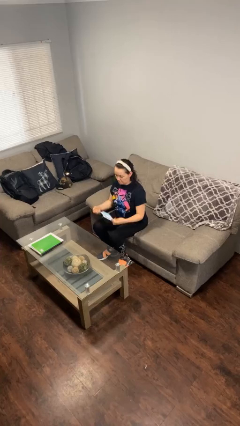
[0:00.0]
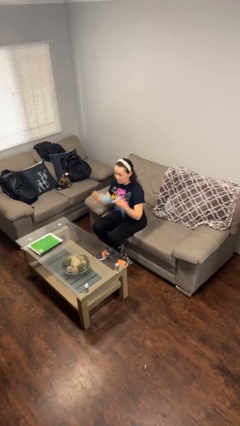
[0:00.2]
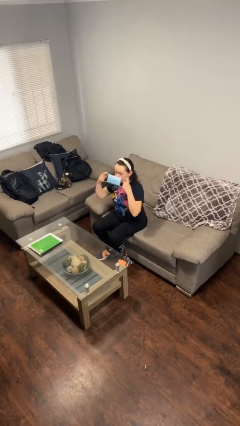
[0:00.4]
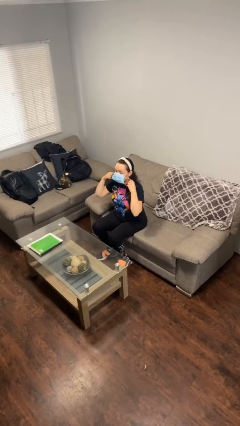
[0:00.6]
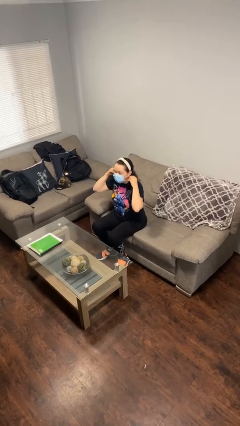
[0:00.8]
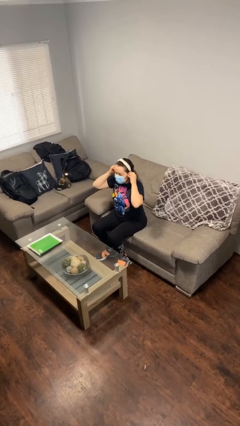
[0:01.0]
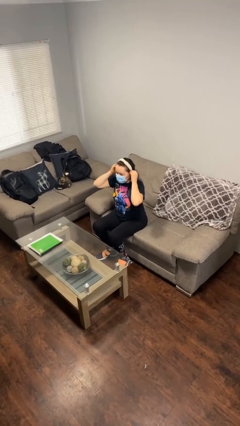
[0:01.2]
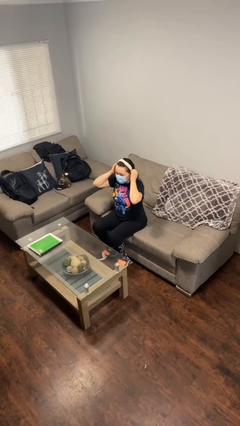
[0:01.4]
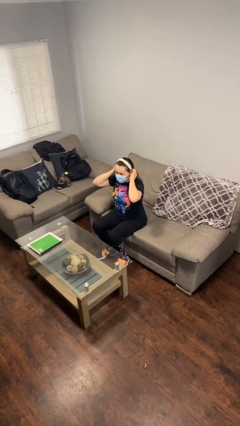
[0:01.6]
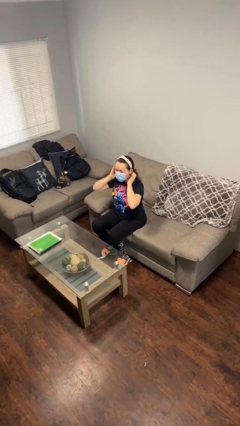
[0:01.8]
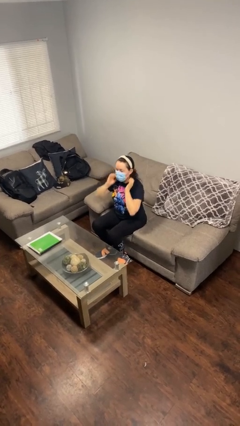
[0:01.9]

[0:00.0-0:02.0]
person puts on facemask

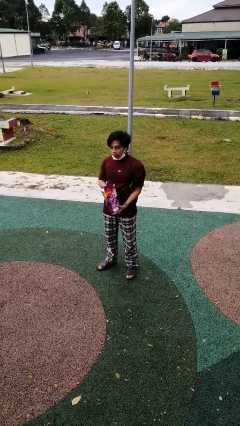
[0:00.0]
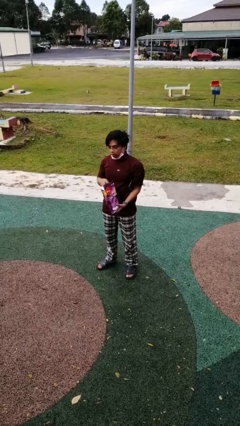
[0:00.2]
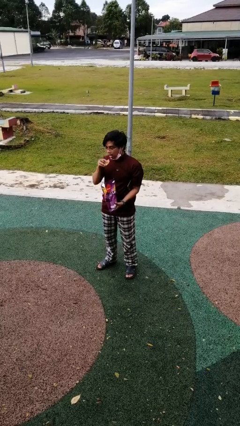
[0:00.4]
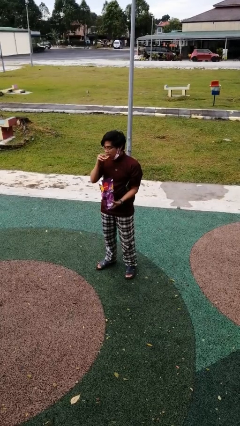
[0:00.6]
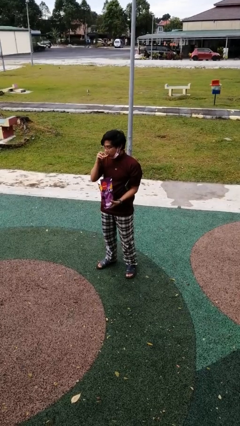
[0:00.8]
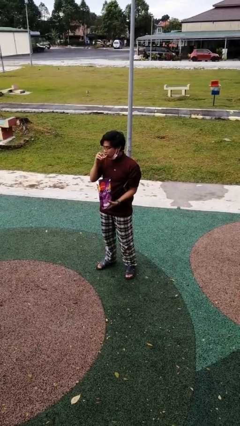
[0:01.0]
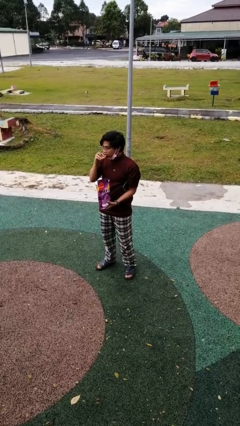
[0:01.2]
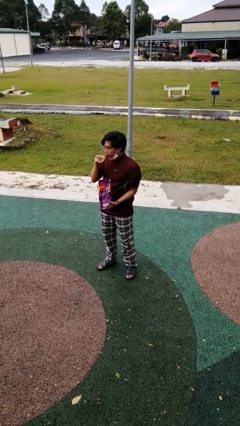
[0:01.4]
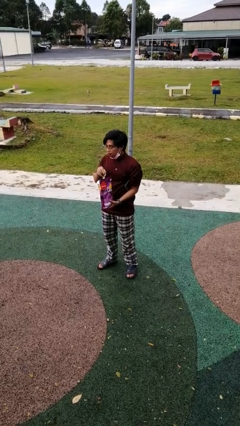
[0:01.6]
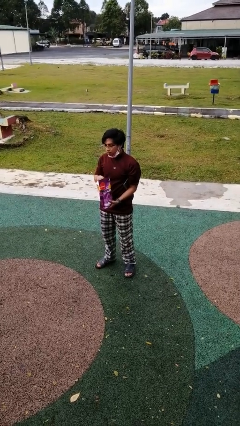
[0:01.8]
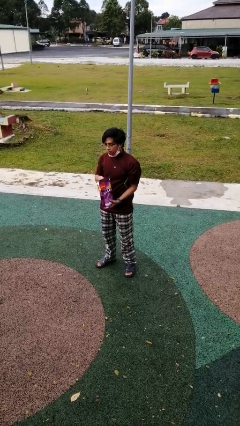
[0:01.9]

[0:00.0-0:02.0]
person eats snack from bag

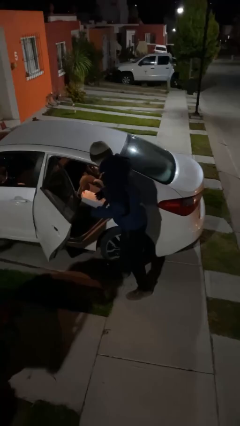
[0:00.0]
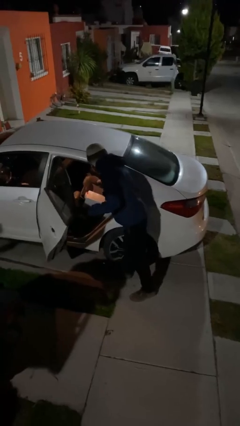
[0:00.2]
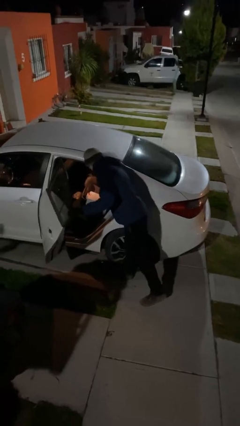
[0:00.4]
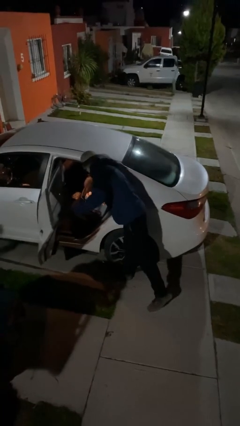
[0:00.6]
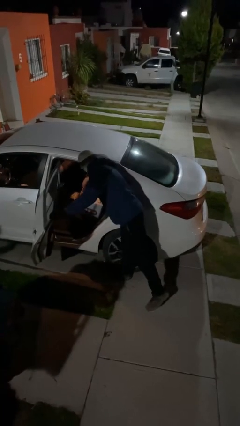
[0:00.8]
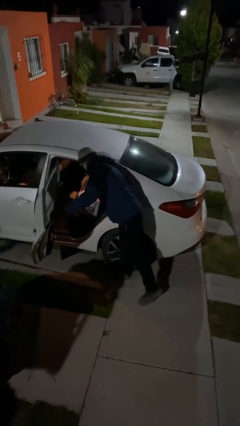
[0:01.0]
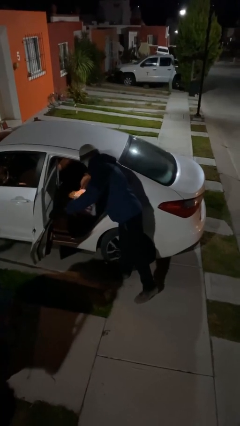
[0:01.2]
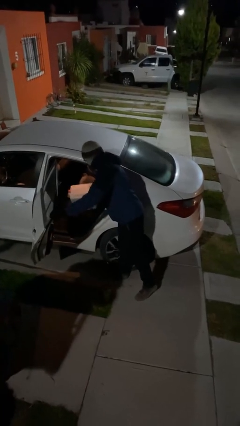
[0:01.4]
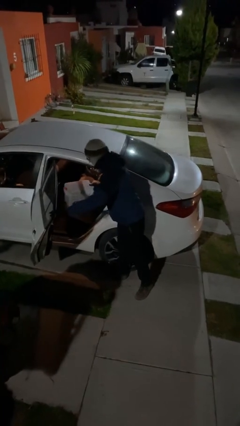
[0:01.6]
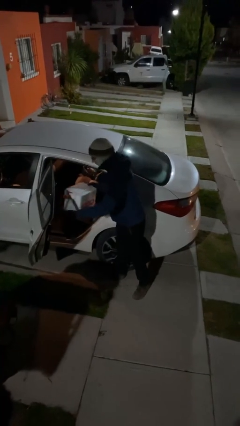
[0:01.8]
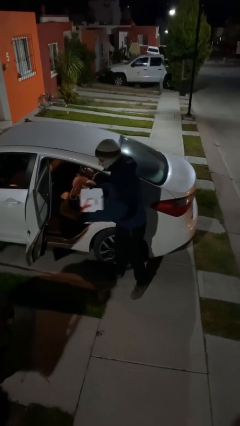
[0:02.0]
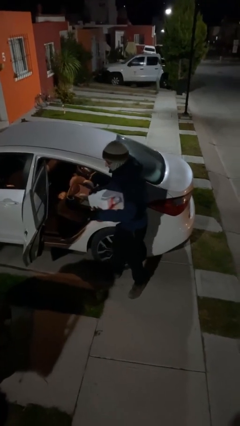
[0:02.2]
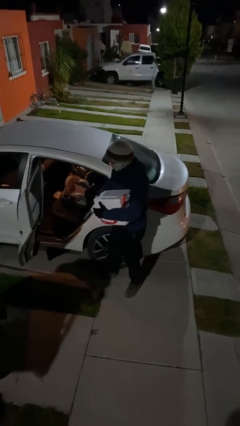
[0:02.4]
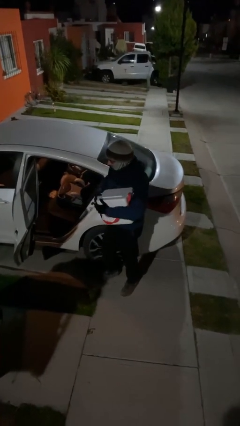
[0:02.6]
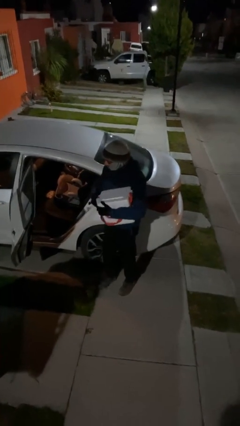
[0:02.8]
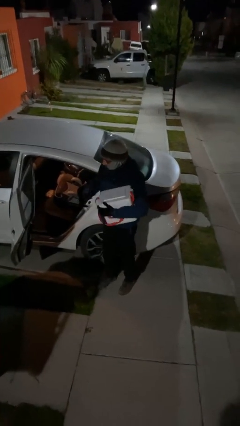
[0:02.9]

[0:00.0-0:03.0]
person unloads car

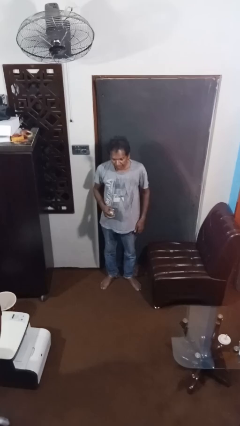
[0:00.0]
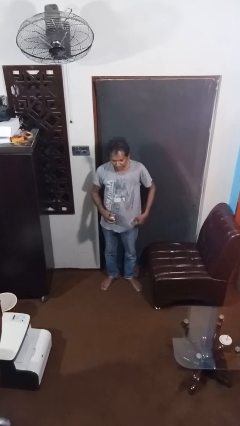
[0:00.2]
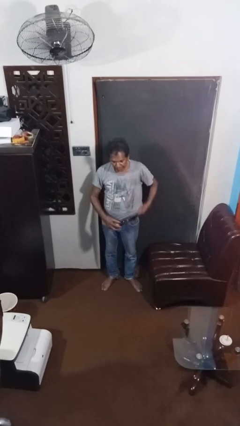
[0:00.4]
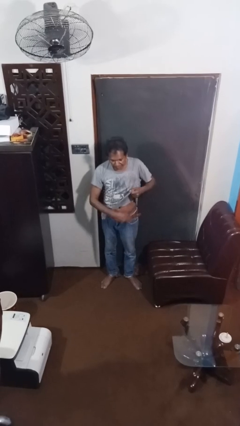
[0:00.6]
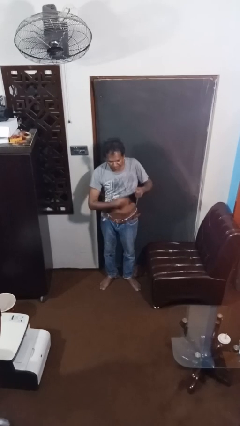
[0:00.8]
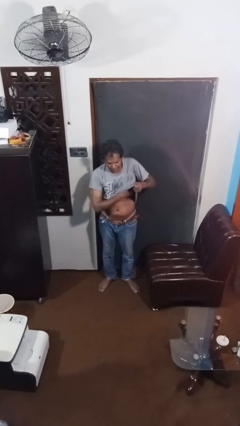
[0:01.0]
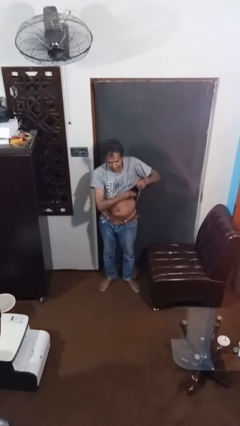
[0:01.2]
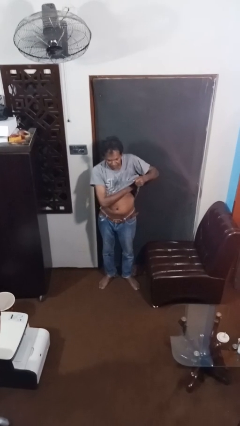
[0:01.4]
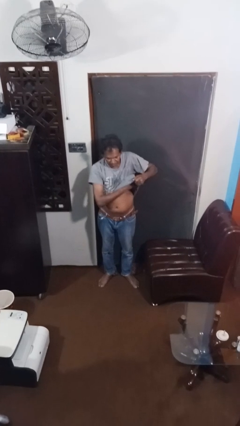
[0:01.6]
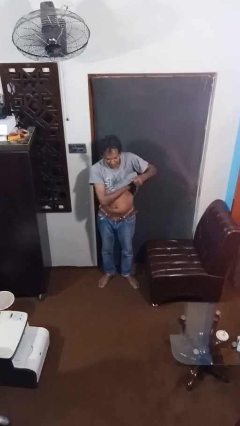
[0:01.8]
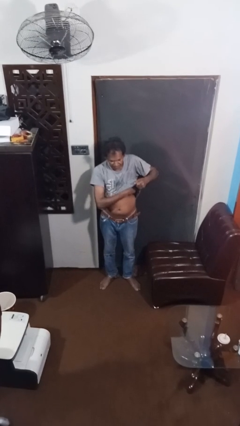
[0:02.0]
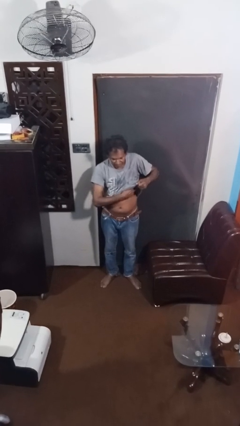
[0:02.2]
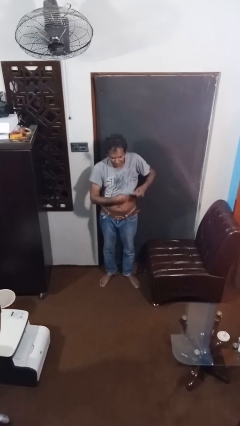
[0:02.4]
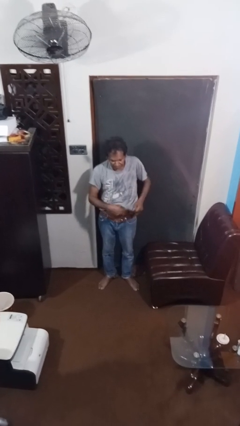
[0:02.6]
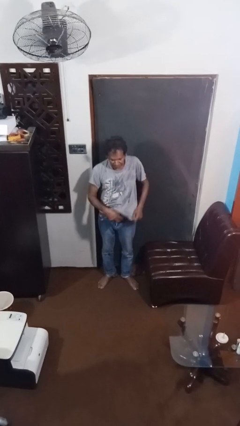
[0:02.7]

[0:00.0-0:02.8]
person applies deodorant

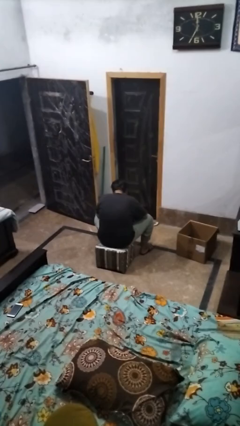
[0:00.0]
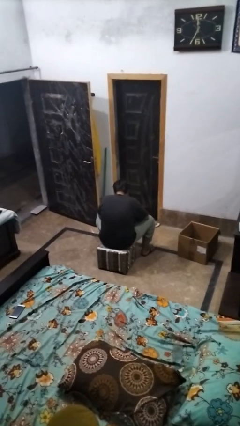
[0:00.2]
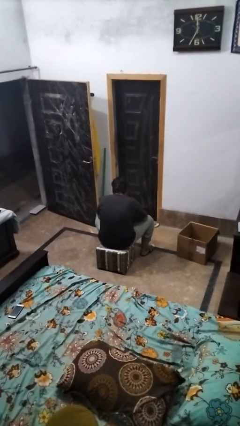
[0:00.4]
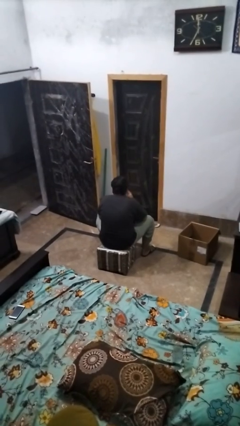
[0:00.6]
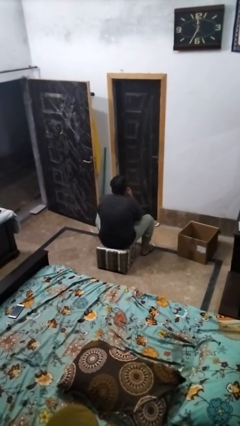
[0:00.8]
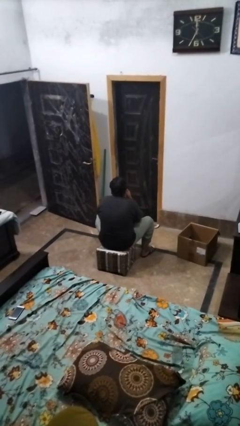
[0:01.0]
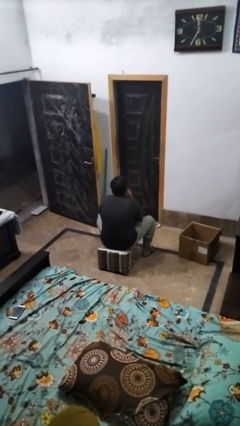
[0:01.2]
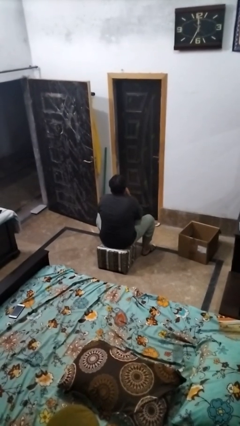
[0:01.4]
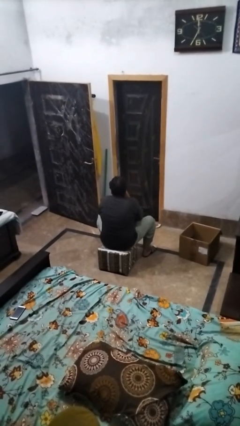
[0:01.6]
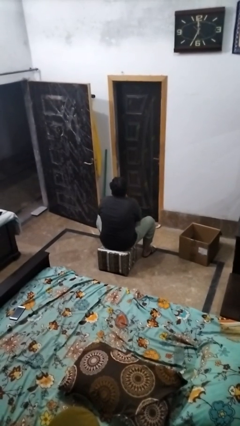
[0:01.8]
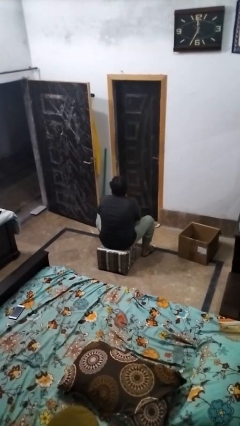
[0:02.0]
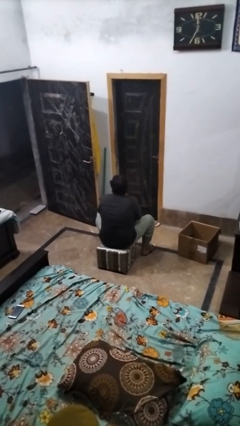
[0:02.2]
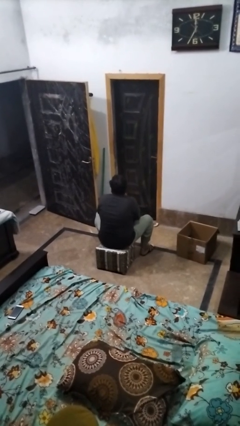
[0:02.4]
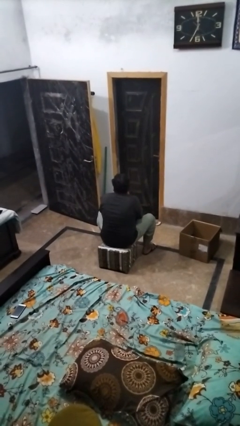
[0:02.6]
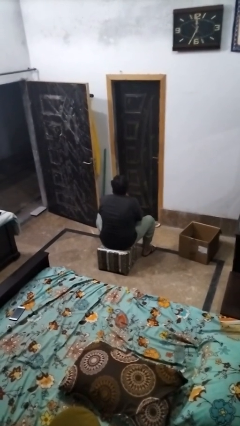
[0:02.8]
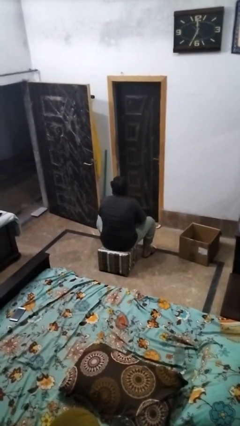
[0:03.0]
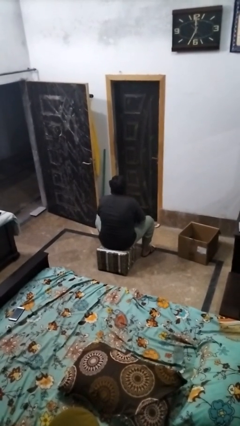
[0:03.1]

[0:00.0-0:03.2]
person strokes chin

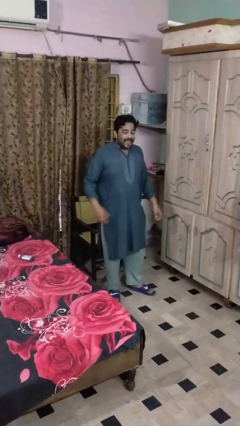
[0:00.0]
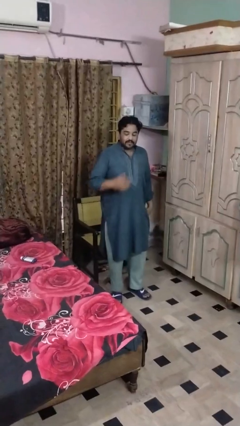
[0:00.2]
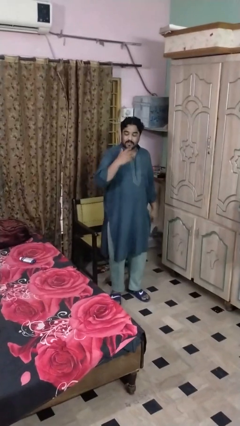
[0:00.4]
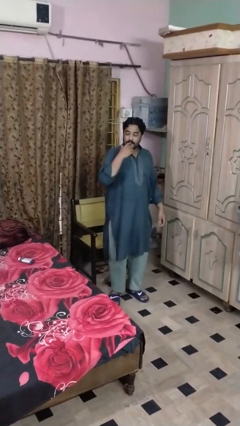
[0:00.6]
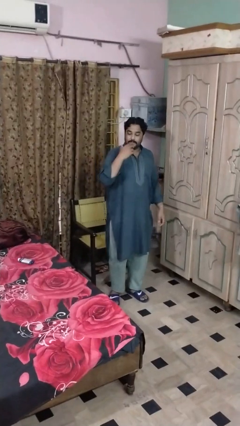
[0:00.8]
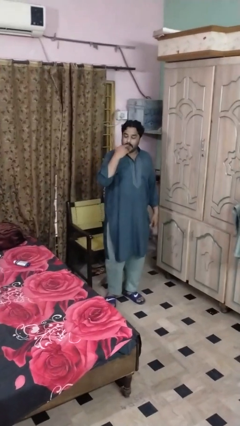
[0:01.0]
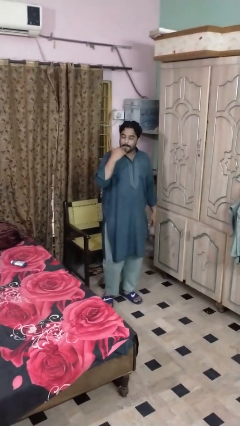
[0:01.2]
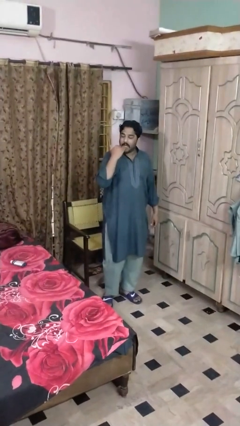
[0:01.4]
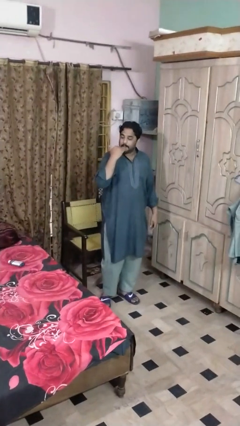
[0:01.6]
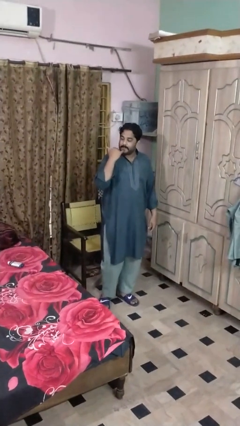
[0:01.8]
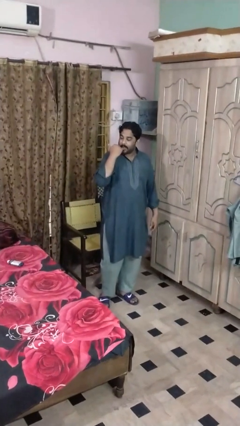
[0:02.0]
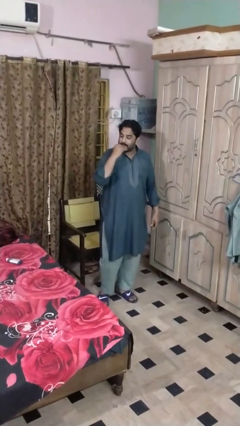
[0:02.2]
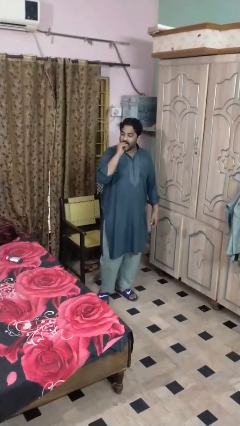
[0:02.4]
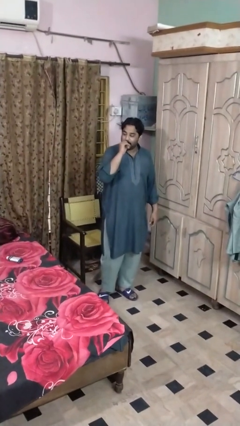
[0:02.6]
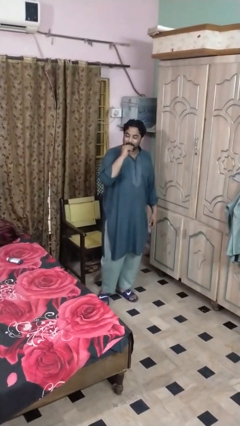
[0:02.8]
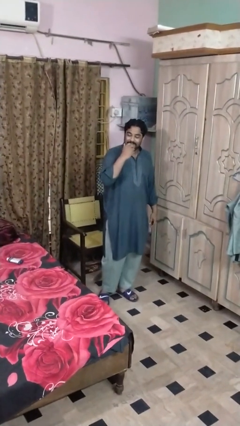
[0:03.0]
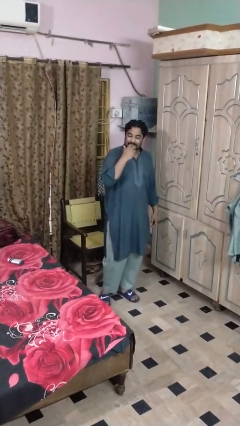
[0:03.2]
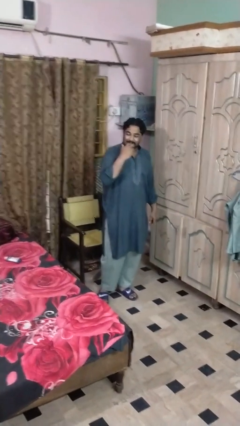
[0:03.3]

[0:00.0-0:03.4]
person licks fingers

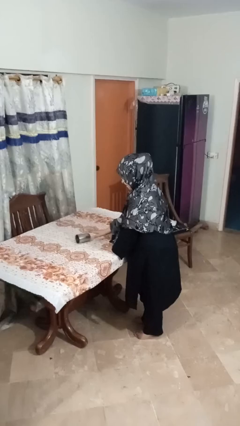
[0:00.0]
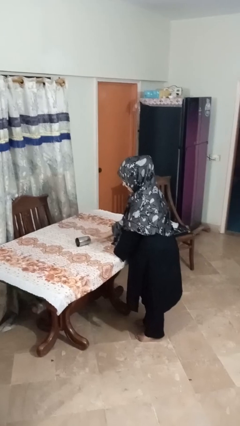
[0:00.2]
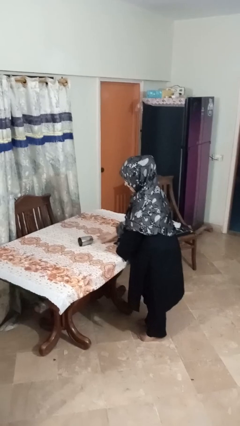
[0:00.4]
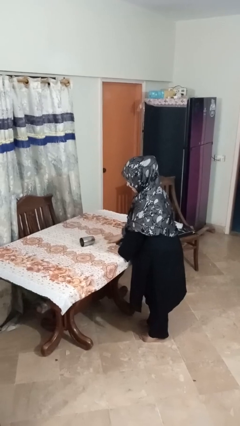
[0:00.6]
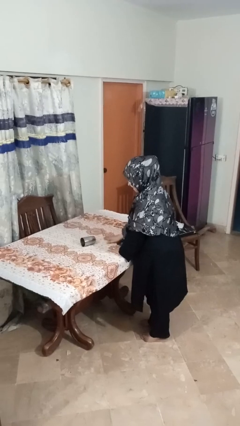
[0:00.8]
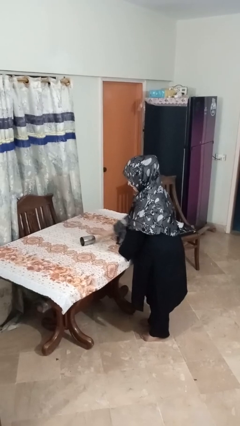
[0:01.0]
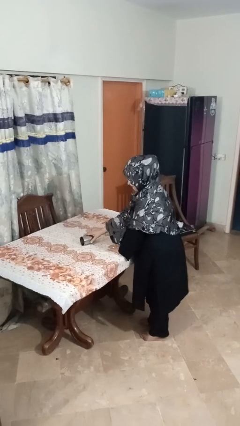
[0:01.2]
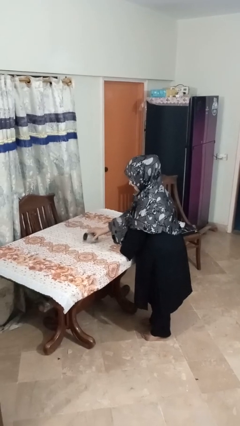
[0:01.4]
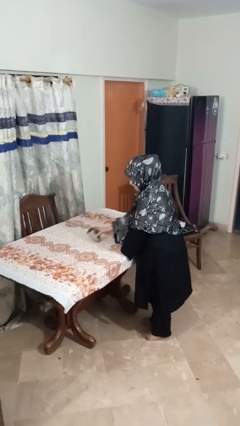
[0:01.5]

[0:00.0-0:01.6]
person knocks over glass
